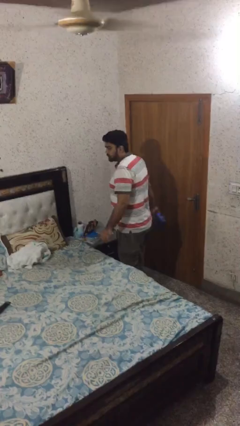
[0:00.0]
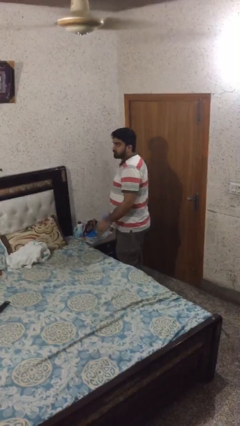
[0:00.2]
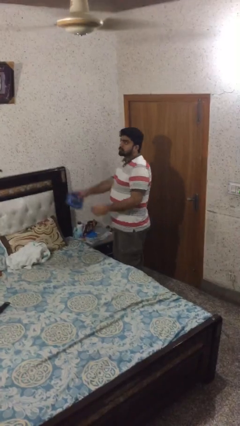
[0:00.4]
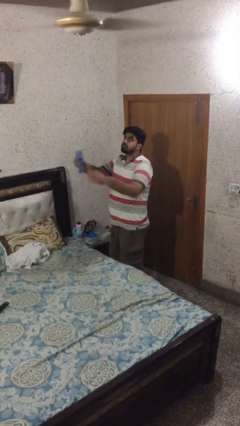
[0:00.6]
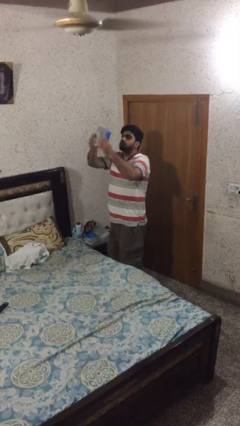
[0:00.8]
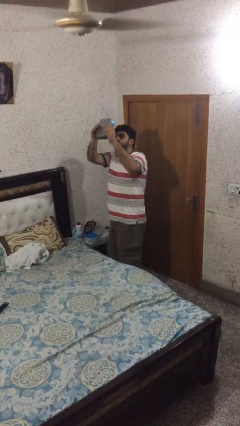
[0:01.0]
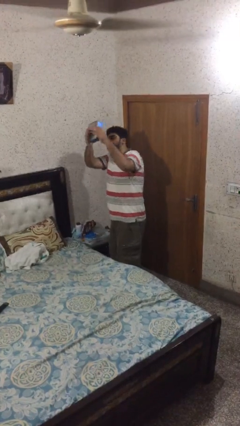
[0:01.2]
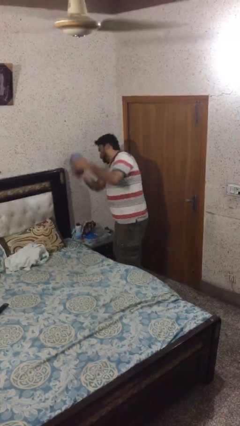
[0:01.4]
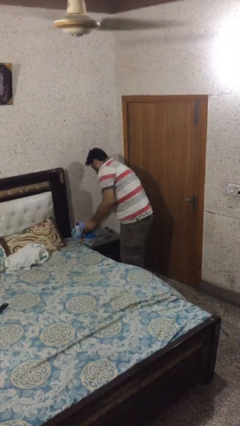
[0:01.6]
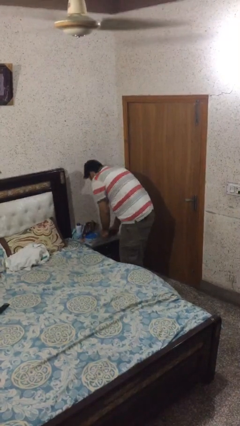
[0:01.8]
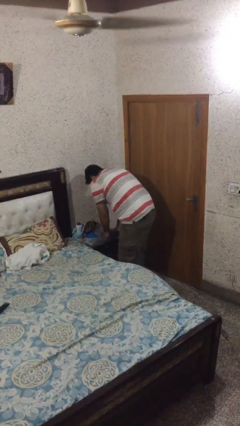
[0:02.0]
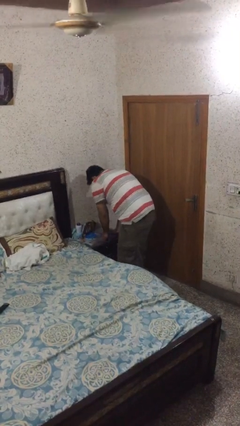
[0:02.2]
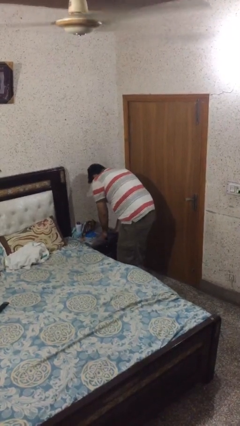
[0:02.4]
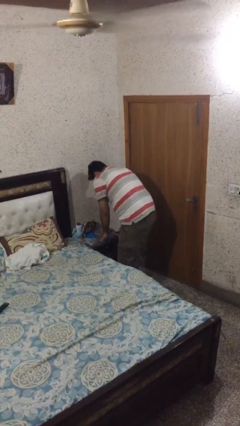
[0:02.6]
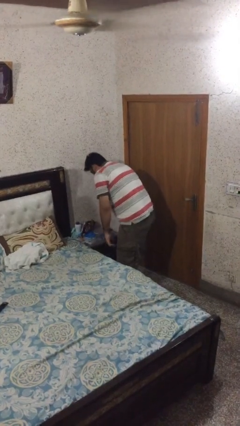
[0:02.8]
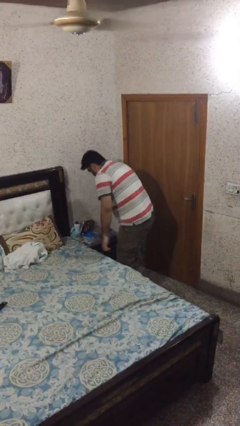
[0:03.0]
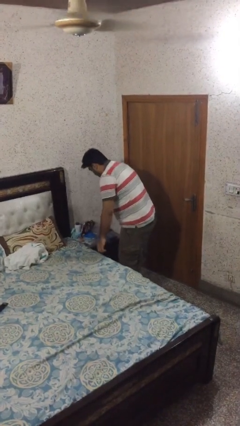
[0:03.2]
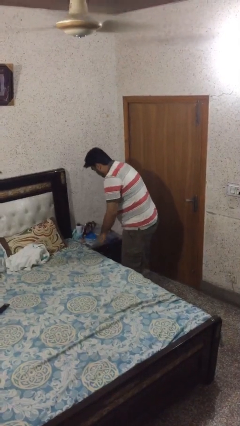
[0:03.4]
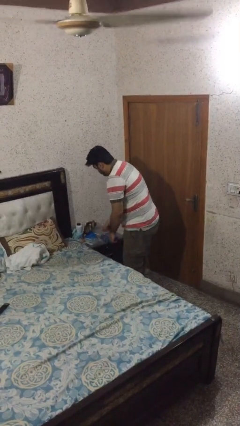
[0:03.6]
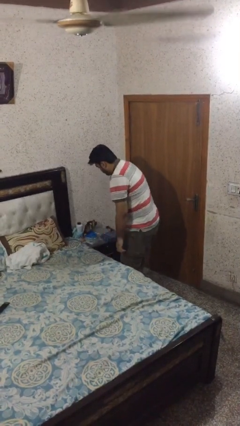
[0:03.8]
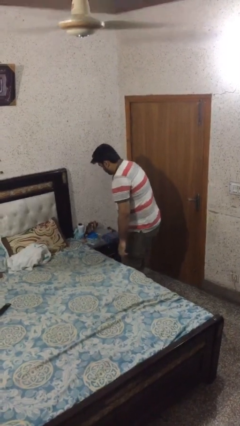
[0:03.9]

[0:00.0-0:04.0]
person puts down object on table

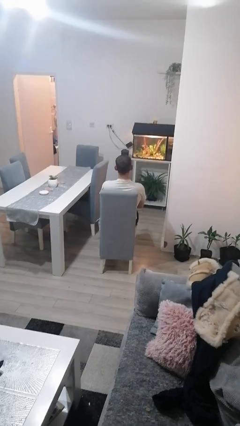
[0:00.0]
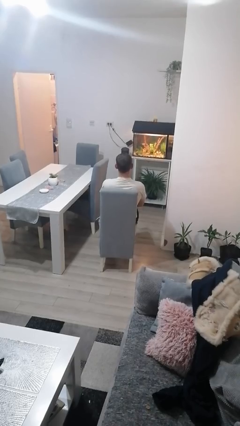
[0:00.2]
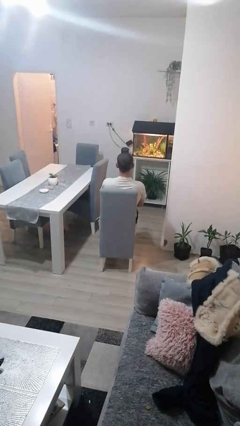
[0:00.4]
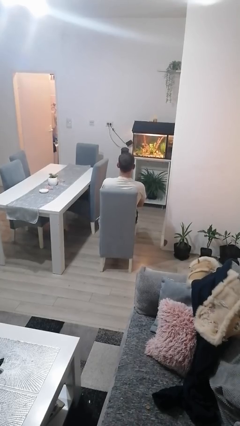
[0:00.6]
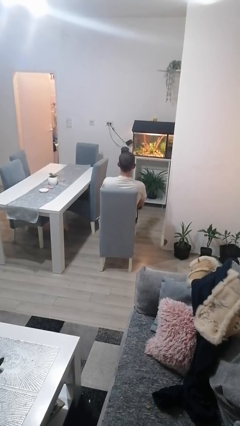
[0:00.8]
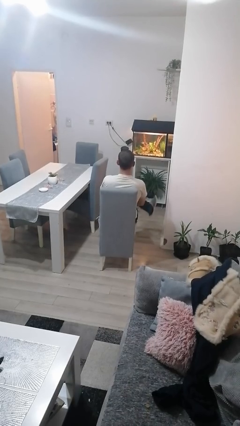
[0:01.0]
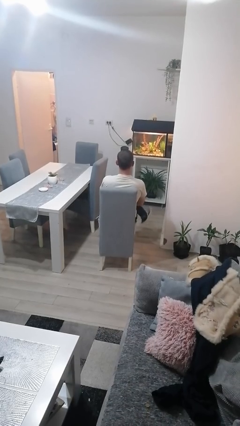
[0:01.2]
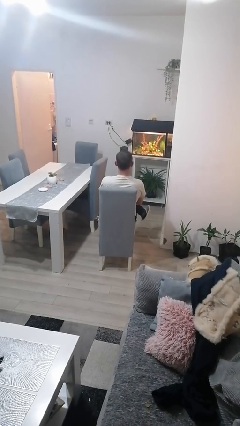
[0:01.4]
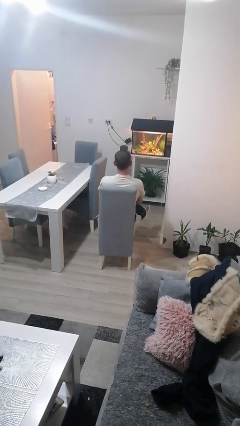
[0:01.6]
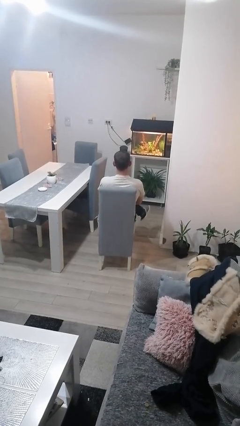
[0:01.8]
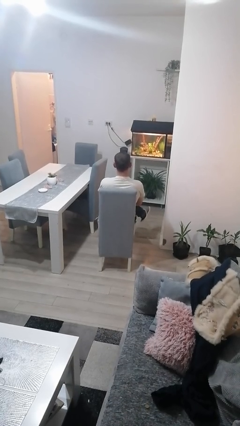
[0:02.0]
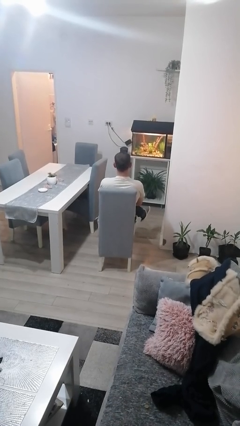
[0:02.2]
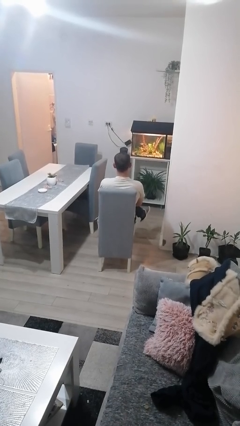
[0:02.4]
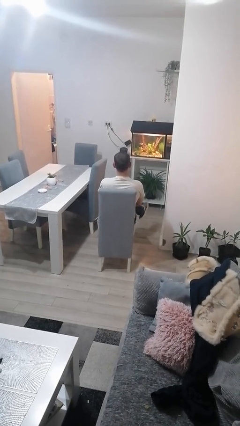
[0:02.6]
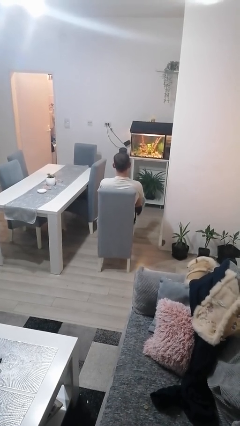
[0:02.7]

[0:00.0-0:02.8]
person crosses legs

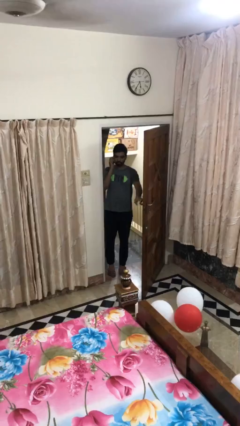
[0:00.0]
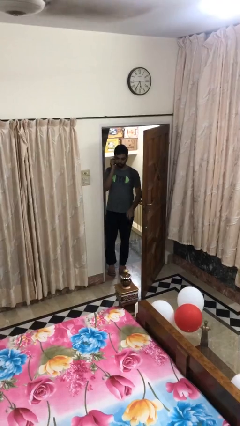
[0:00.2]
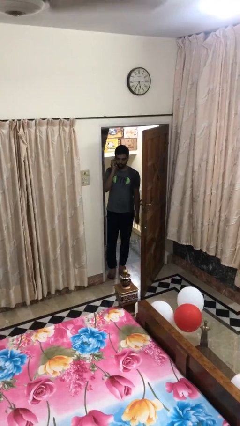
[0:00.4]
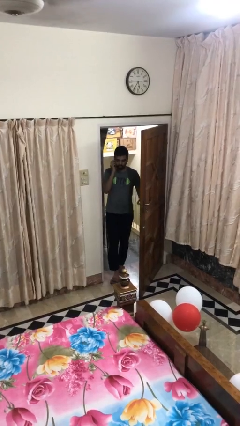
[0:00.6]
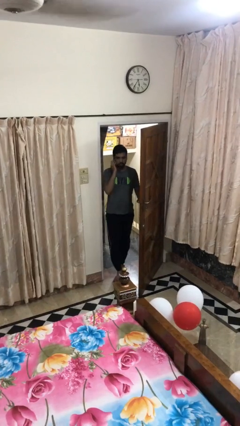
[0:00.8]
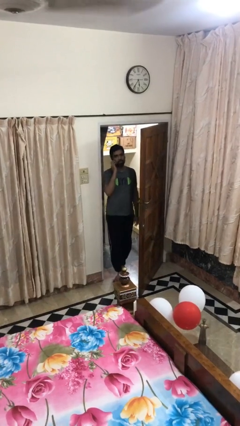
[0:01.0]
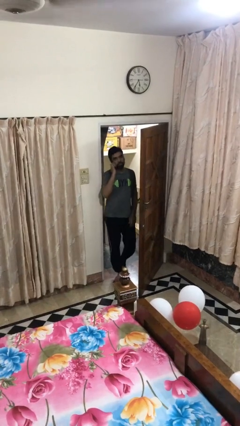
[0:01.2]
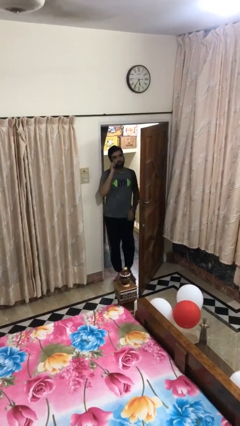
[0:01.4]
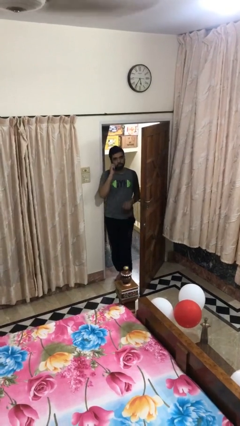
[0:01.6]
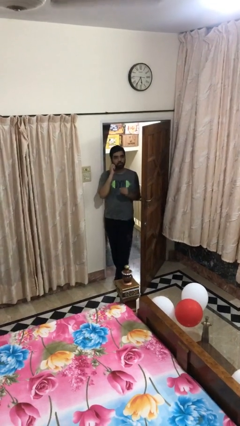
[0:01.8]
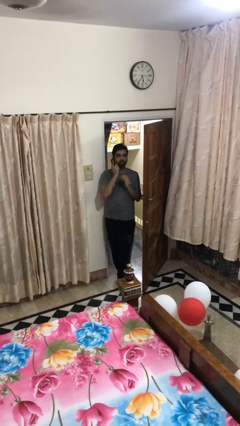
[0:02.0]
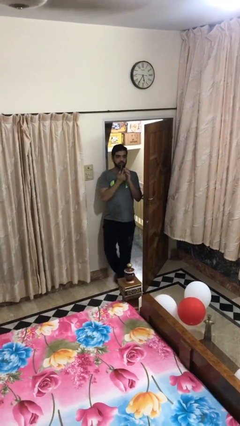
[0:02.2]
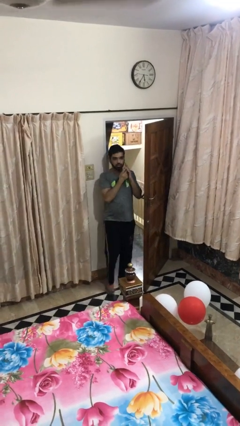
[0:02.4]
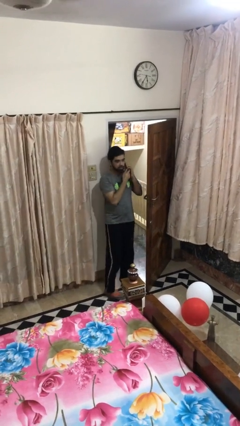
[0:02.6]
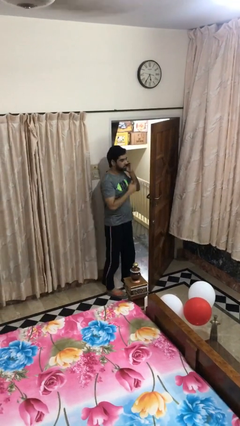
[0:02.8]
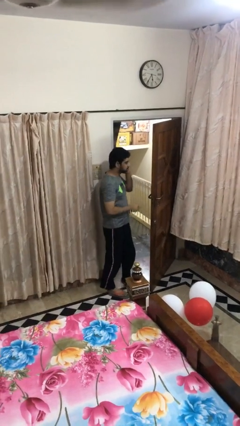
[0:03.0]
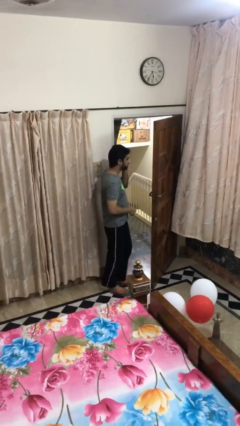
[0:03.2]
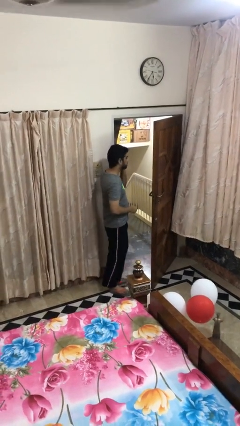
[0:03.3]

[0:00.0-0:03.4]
person enters scene through structure

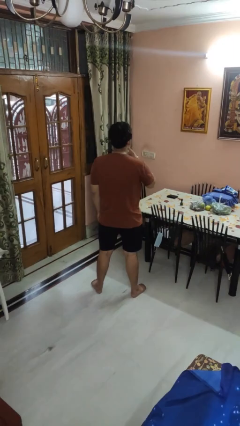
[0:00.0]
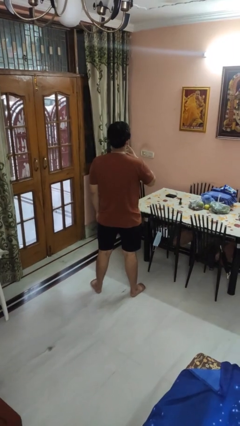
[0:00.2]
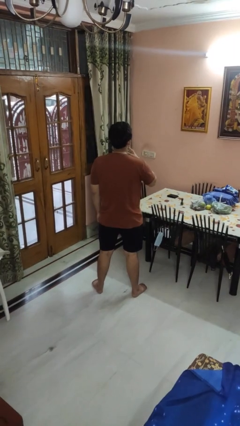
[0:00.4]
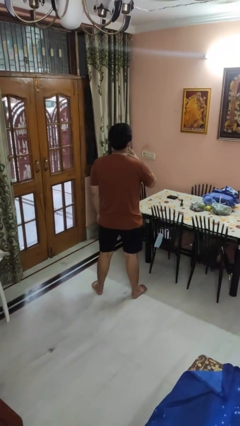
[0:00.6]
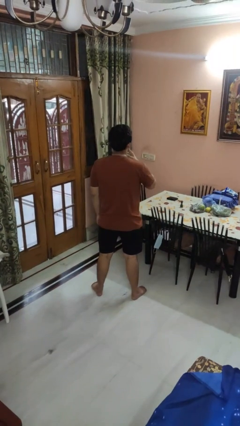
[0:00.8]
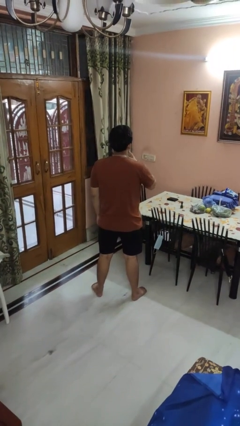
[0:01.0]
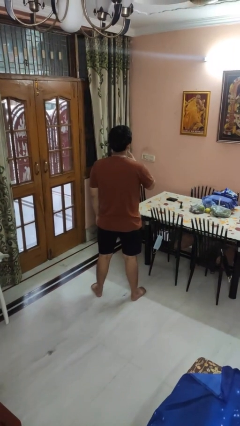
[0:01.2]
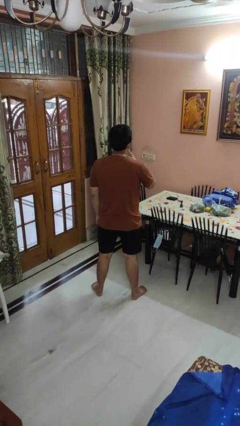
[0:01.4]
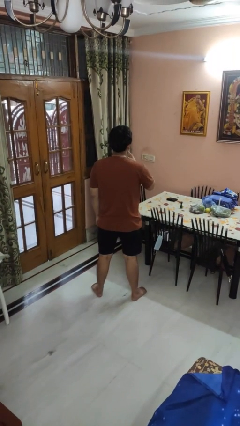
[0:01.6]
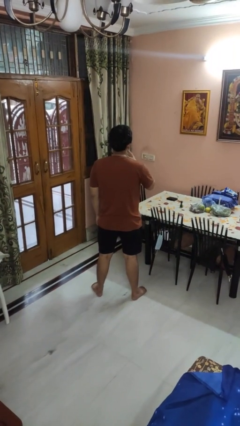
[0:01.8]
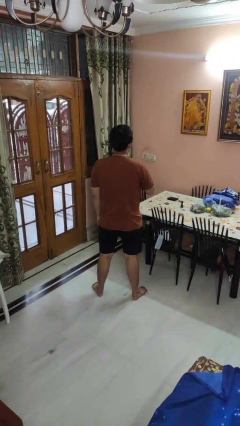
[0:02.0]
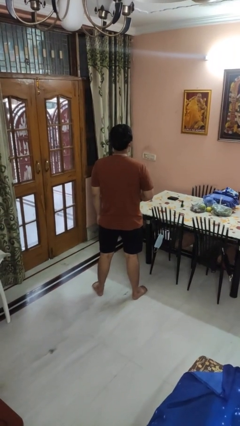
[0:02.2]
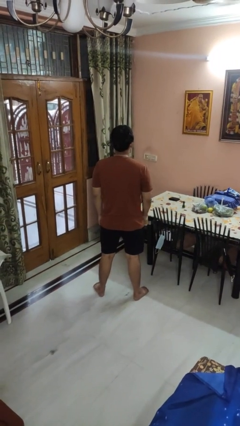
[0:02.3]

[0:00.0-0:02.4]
person strokes chin

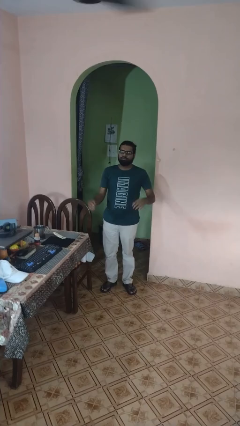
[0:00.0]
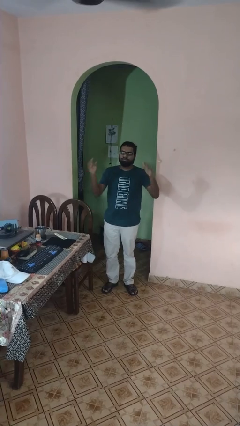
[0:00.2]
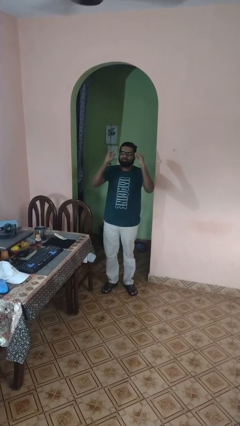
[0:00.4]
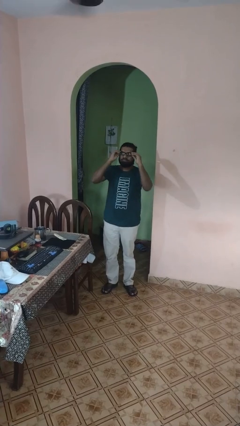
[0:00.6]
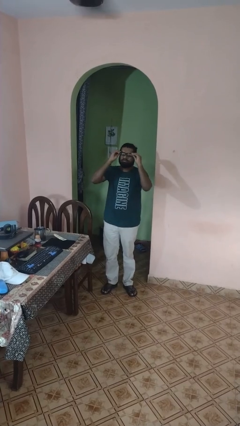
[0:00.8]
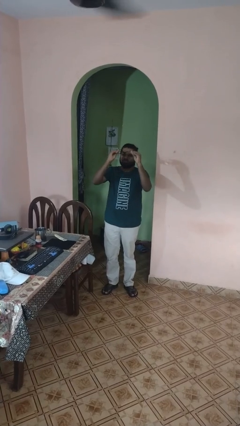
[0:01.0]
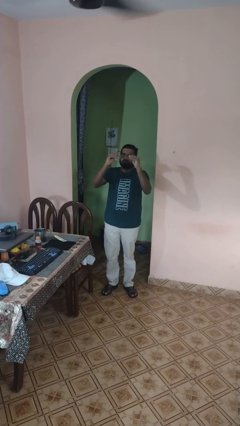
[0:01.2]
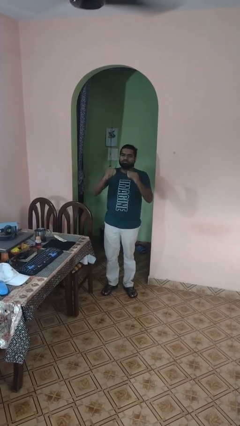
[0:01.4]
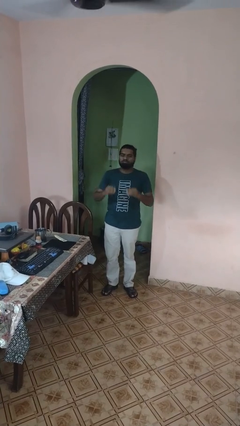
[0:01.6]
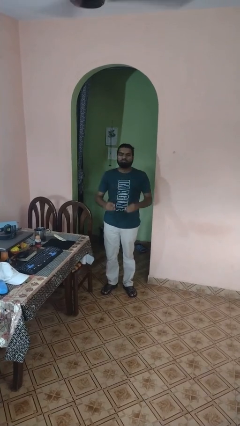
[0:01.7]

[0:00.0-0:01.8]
person takes off glasses

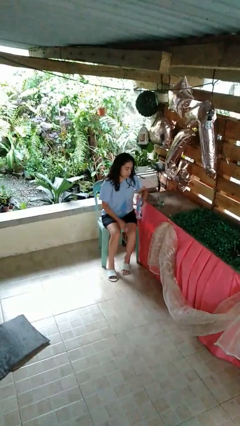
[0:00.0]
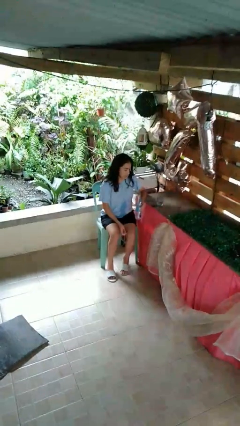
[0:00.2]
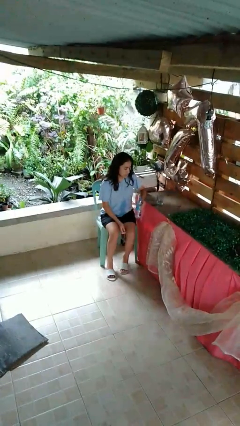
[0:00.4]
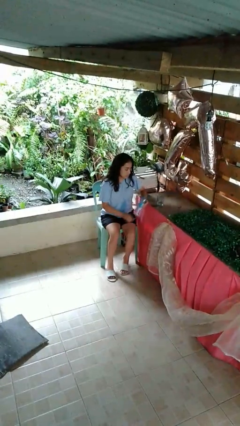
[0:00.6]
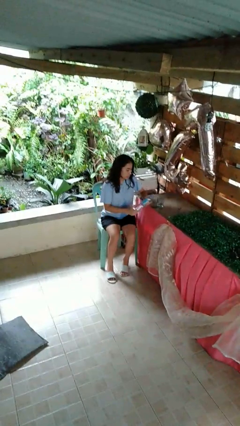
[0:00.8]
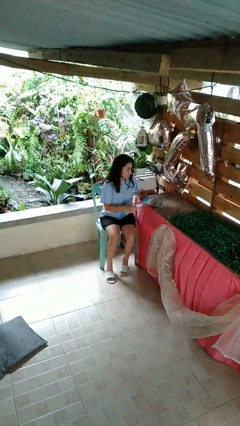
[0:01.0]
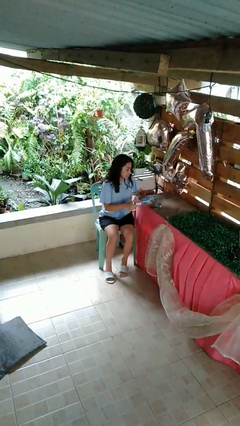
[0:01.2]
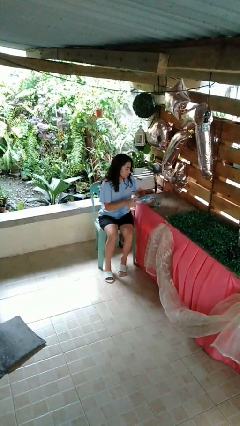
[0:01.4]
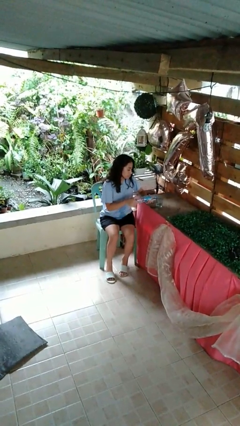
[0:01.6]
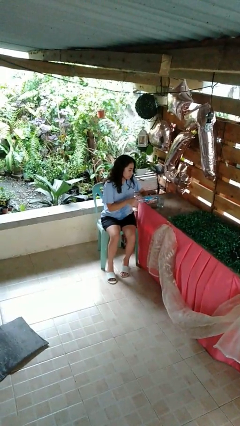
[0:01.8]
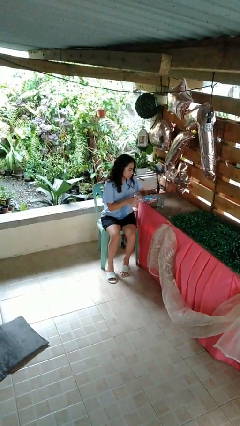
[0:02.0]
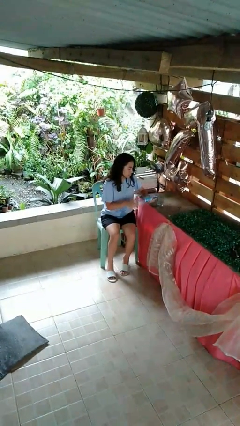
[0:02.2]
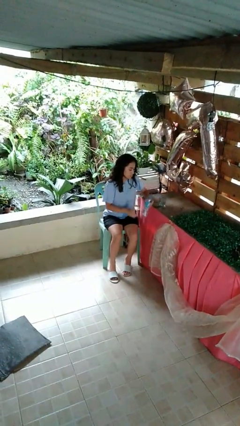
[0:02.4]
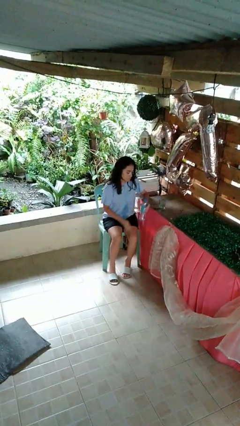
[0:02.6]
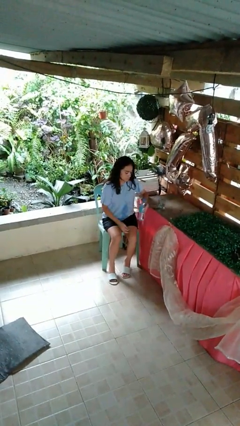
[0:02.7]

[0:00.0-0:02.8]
person pours liquid into cup
